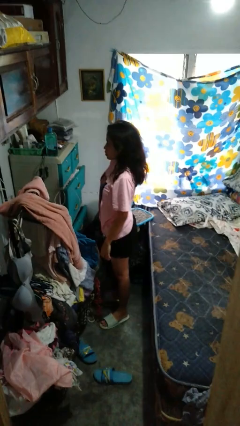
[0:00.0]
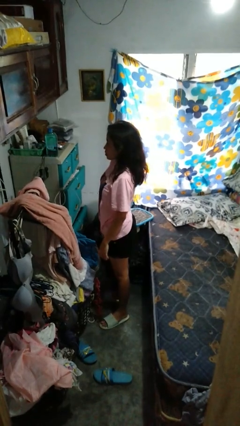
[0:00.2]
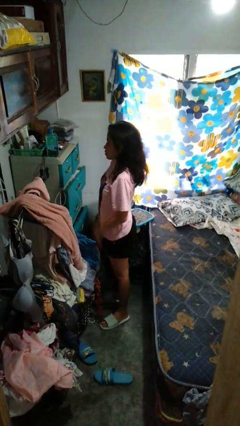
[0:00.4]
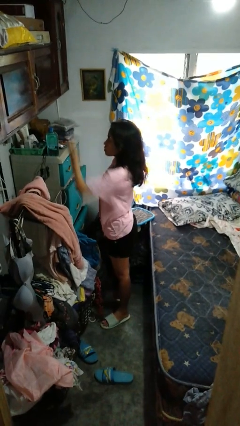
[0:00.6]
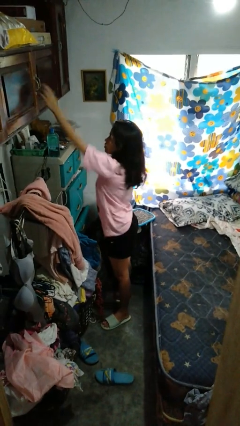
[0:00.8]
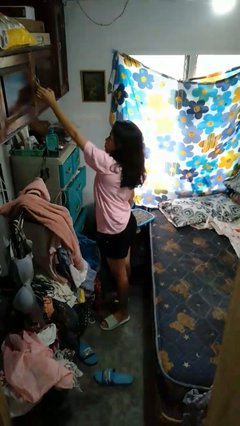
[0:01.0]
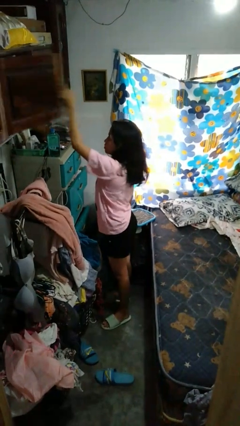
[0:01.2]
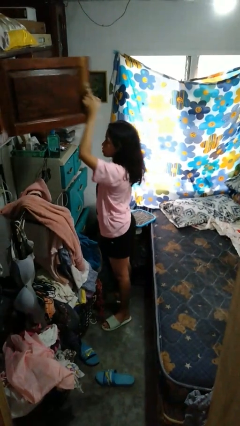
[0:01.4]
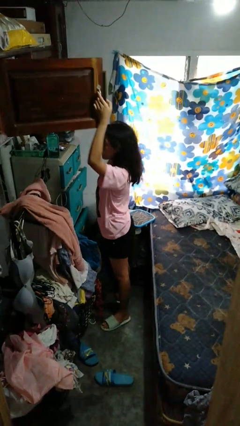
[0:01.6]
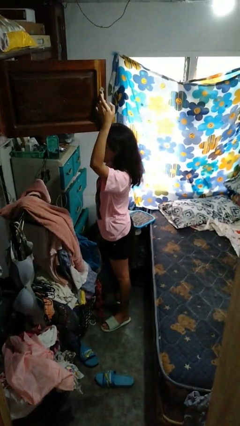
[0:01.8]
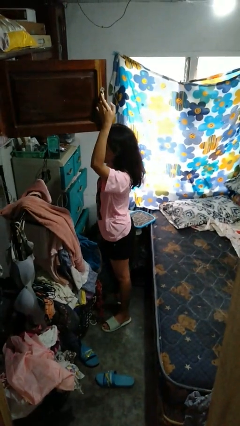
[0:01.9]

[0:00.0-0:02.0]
person opens closet door

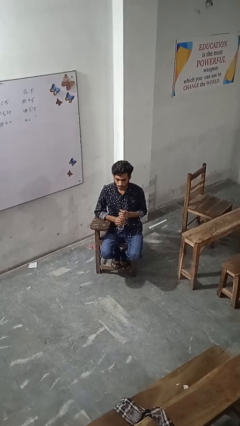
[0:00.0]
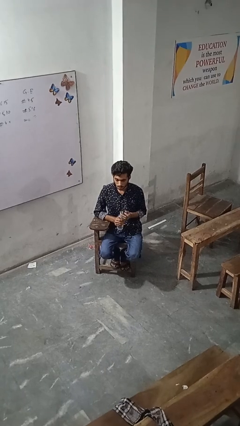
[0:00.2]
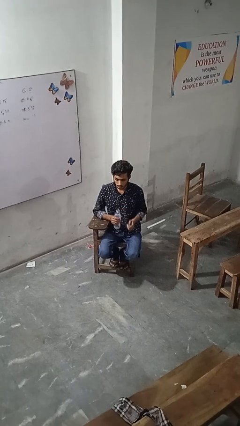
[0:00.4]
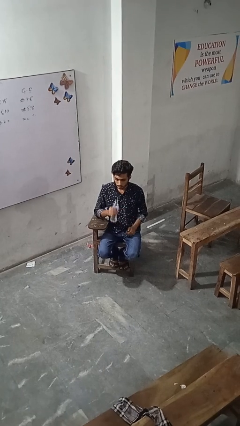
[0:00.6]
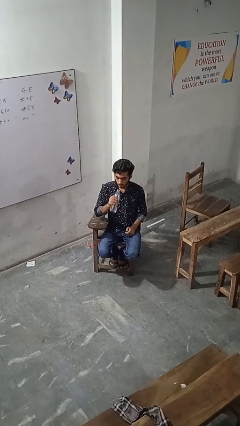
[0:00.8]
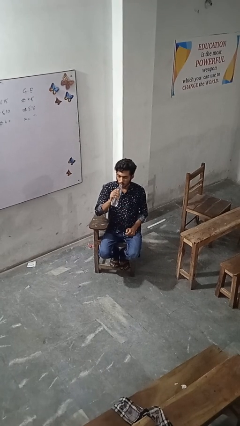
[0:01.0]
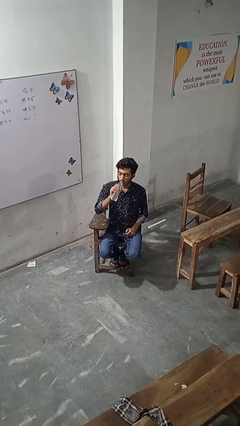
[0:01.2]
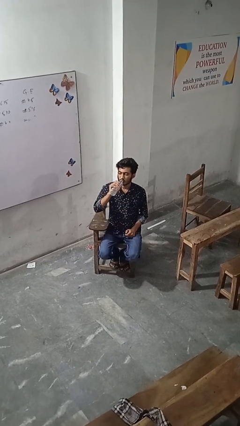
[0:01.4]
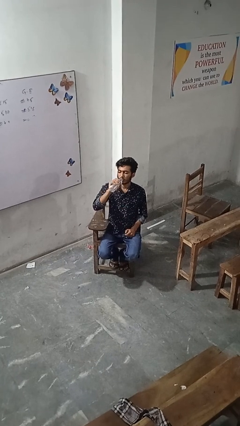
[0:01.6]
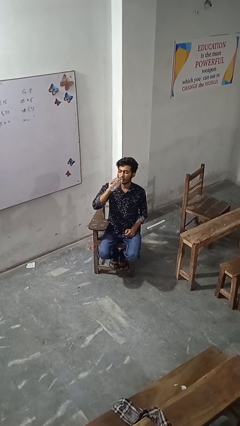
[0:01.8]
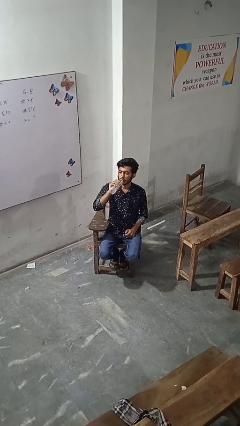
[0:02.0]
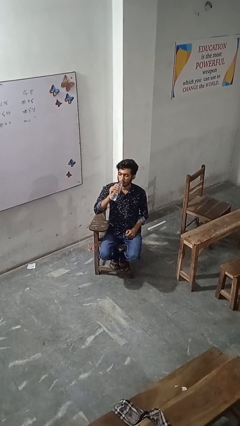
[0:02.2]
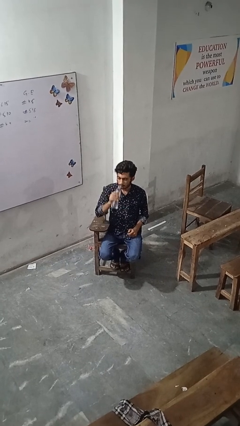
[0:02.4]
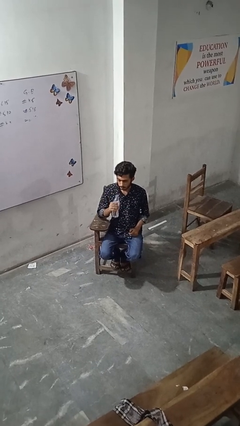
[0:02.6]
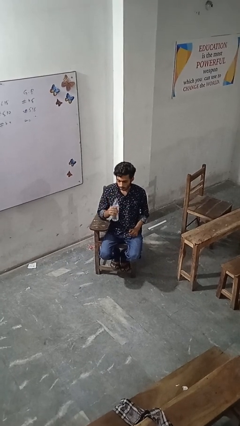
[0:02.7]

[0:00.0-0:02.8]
person drinks from bottle

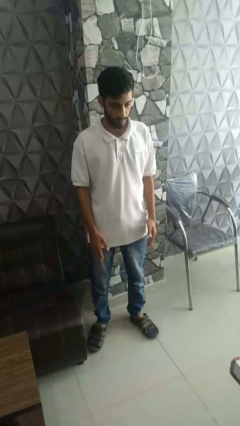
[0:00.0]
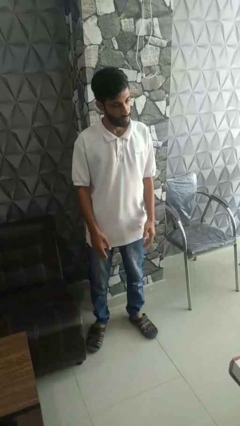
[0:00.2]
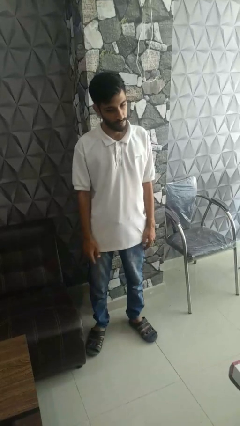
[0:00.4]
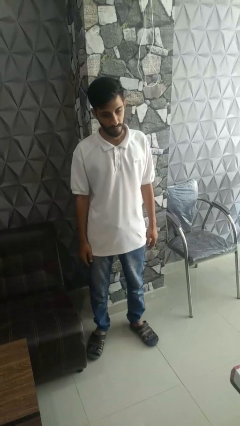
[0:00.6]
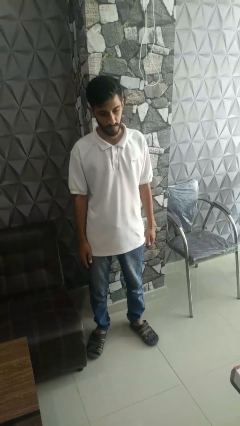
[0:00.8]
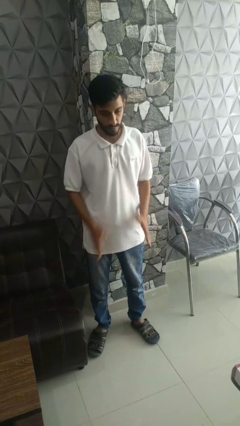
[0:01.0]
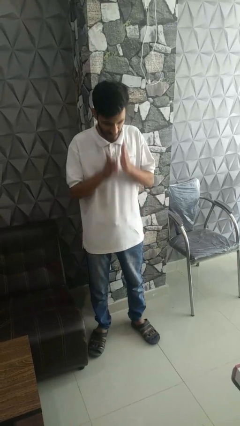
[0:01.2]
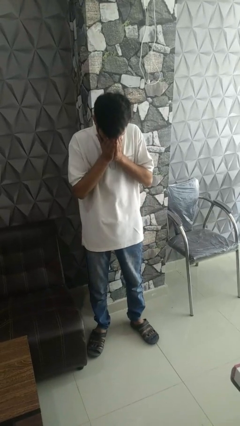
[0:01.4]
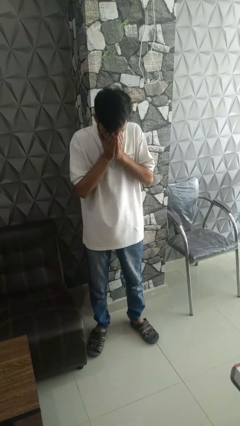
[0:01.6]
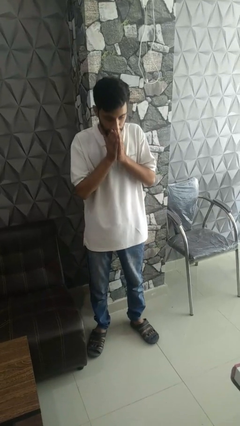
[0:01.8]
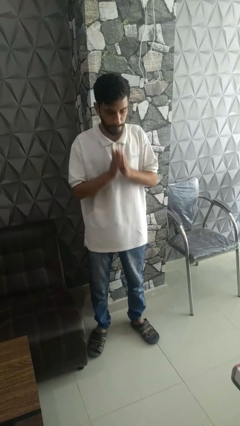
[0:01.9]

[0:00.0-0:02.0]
person sneezes into hand

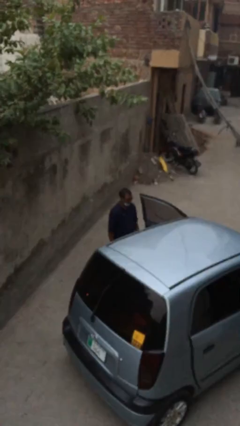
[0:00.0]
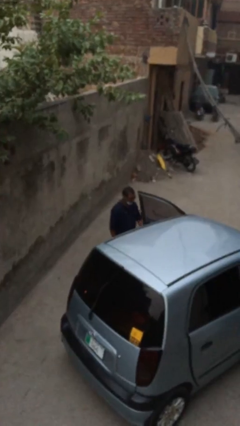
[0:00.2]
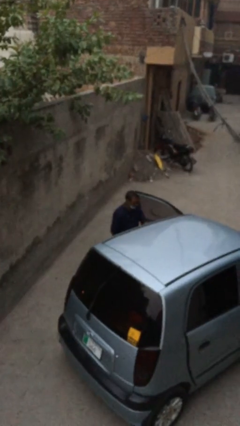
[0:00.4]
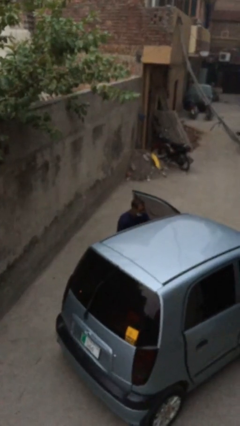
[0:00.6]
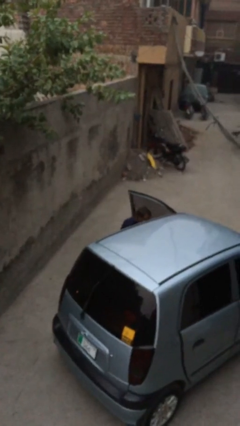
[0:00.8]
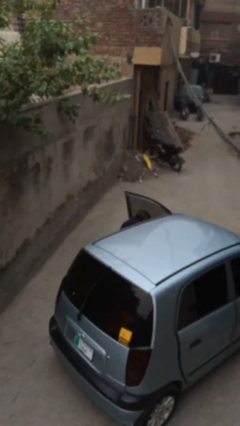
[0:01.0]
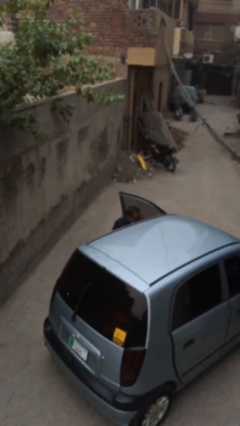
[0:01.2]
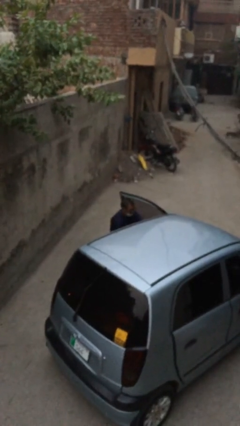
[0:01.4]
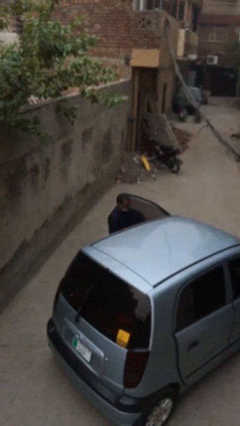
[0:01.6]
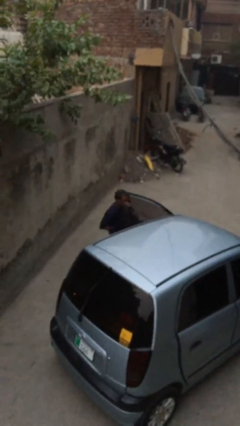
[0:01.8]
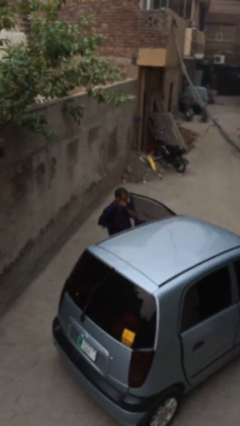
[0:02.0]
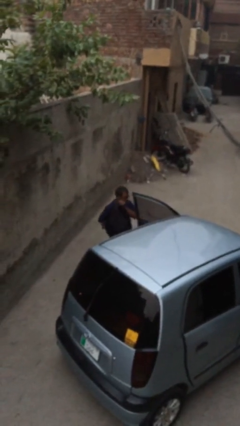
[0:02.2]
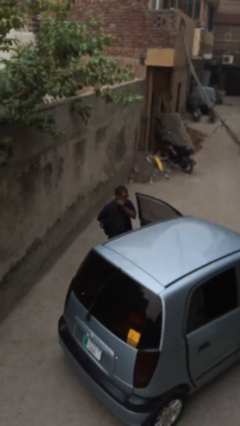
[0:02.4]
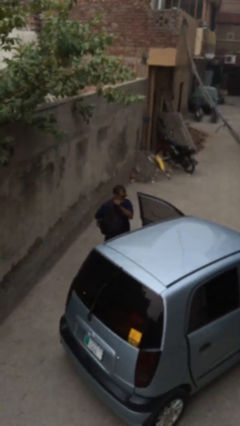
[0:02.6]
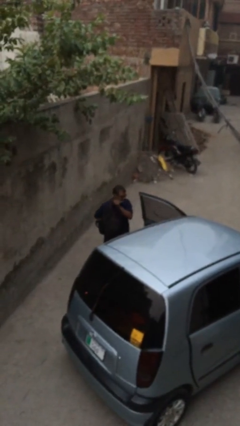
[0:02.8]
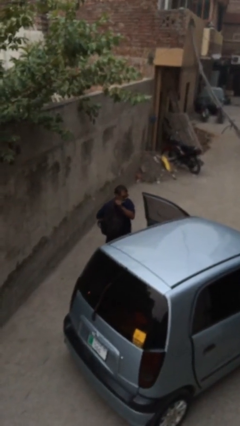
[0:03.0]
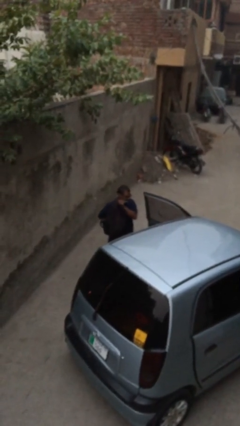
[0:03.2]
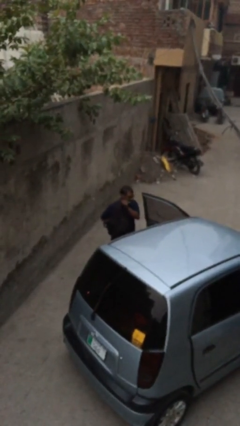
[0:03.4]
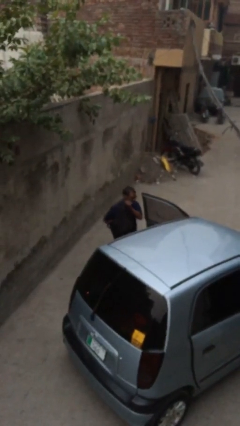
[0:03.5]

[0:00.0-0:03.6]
person unloads car

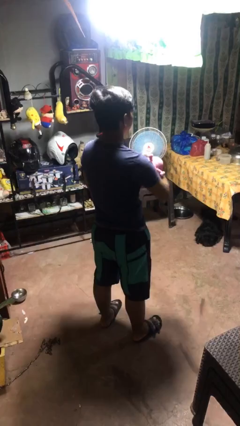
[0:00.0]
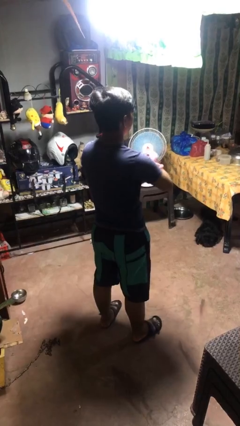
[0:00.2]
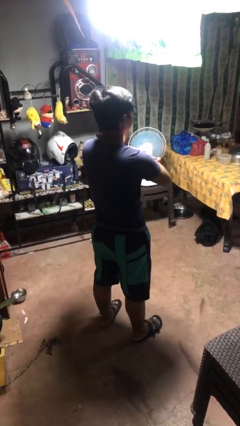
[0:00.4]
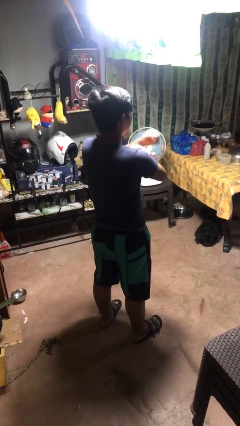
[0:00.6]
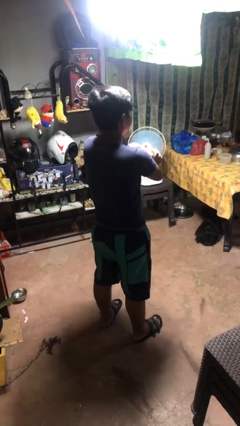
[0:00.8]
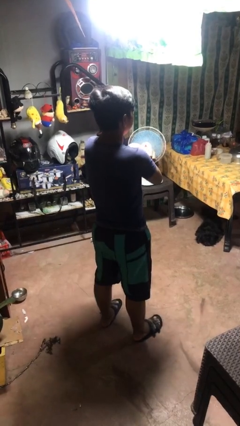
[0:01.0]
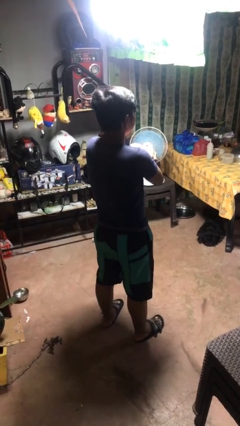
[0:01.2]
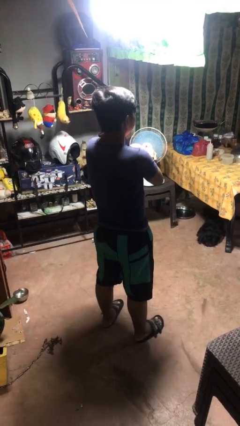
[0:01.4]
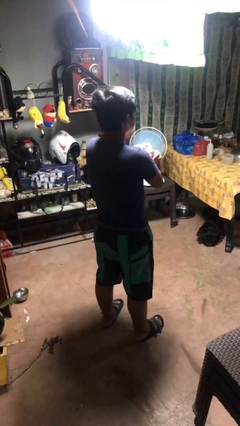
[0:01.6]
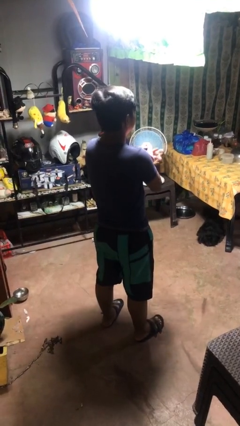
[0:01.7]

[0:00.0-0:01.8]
person hugs stuffed animal

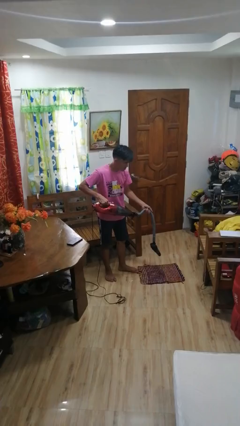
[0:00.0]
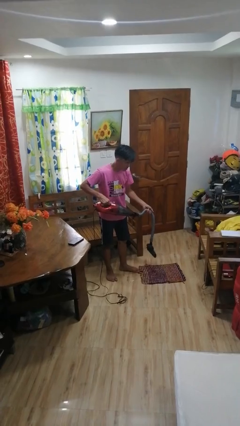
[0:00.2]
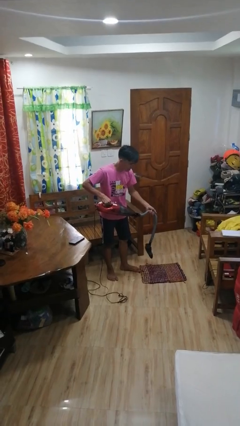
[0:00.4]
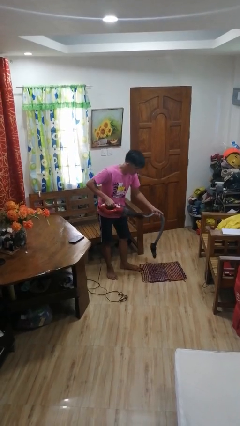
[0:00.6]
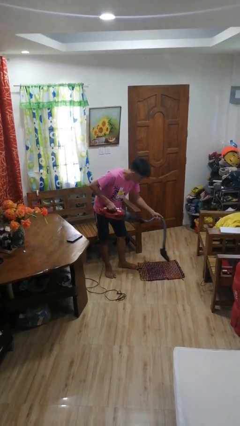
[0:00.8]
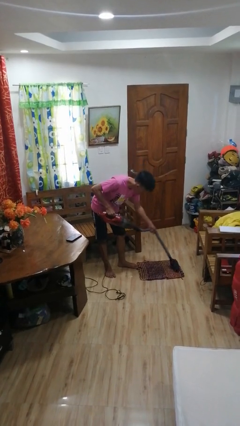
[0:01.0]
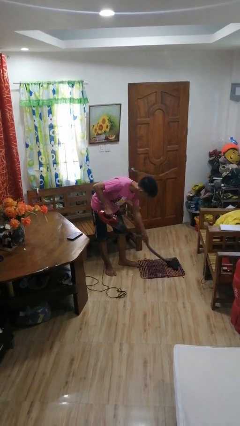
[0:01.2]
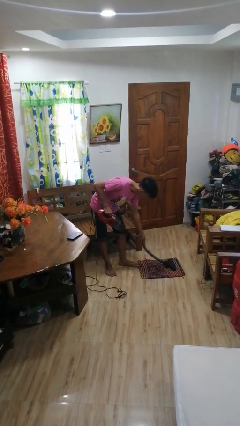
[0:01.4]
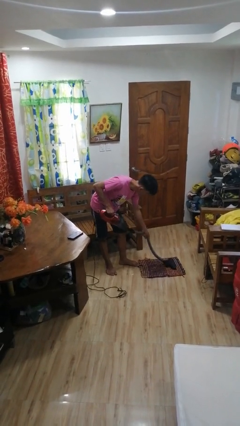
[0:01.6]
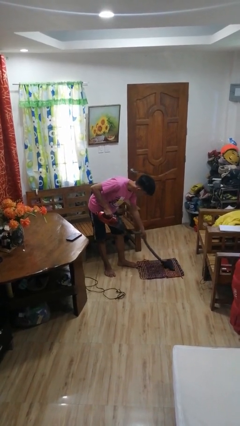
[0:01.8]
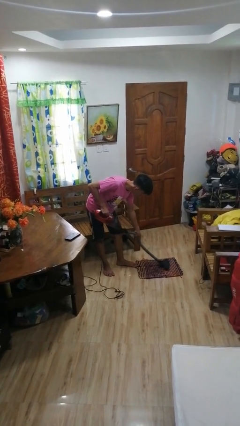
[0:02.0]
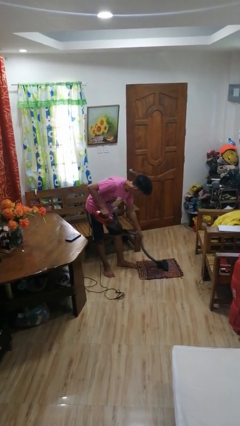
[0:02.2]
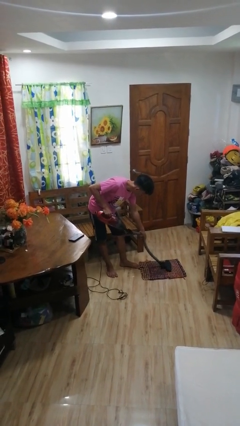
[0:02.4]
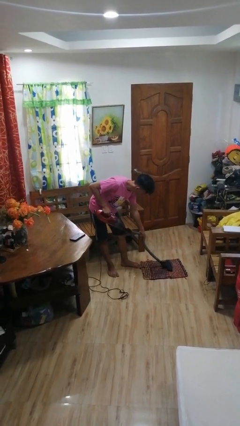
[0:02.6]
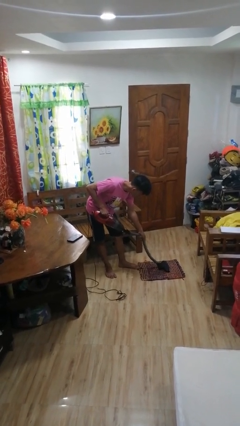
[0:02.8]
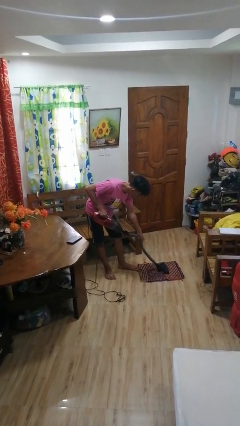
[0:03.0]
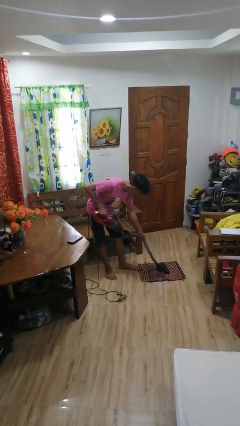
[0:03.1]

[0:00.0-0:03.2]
person vacuums carpet

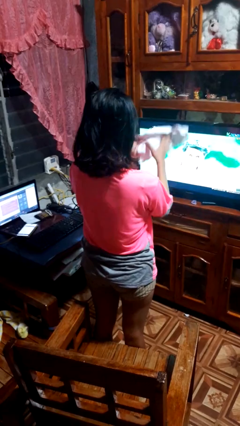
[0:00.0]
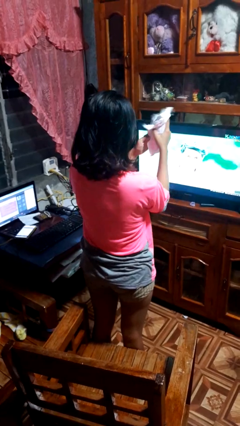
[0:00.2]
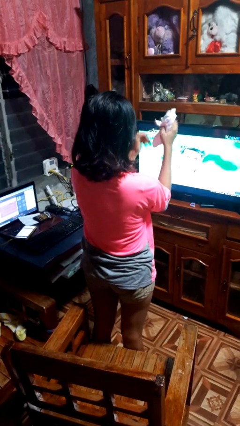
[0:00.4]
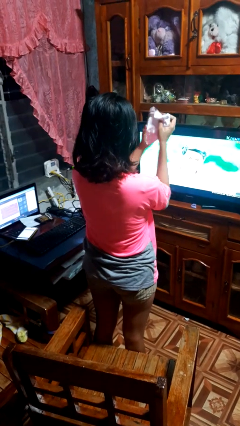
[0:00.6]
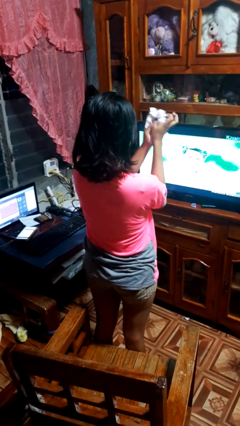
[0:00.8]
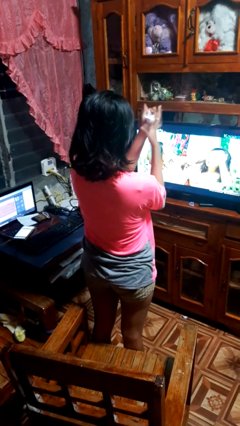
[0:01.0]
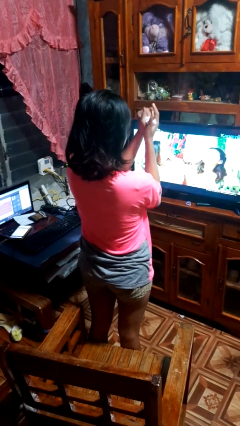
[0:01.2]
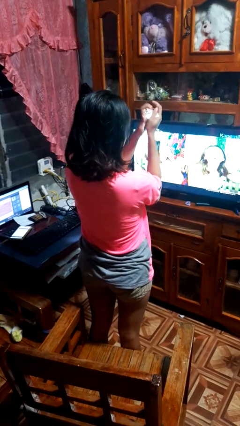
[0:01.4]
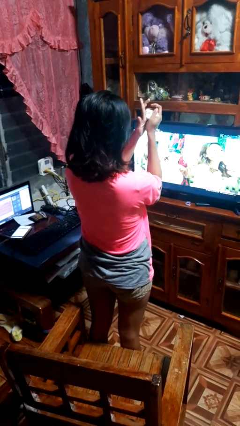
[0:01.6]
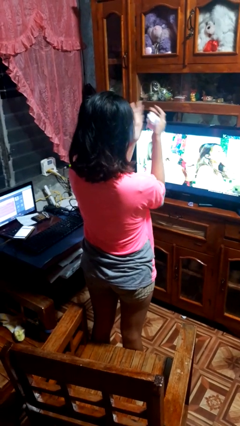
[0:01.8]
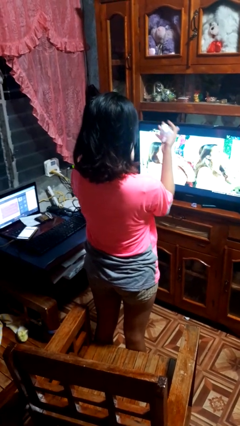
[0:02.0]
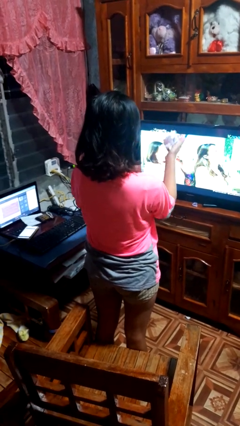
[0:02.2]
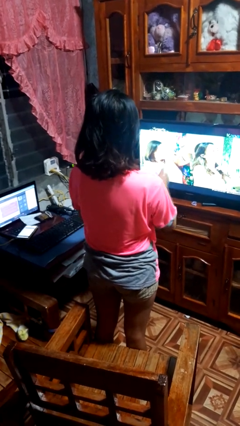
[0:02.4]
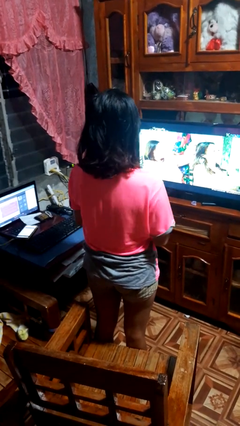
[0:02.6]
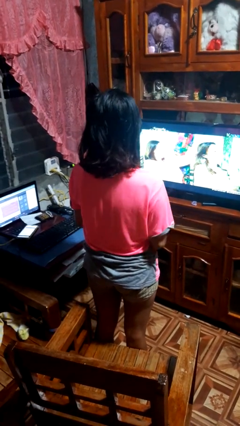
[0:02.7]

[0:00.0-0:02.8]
person crumples paper
